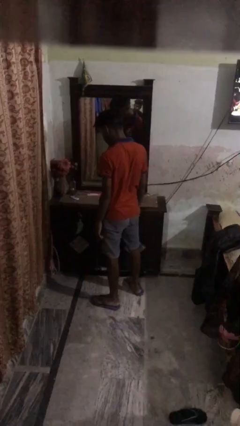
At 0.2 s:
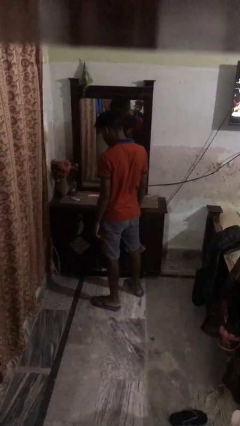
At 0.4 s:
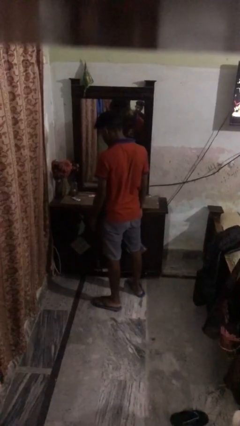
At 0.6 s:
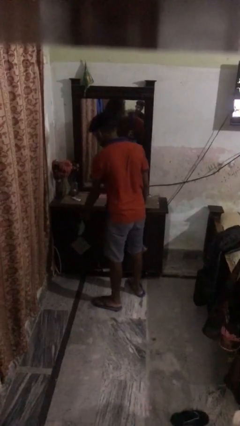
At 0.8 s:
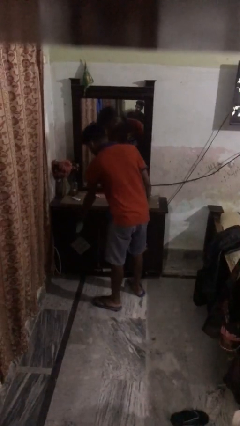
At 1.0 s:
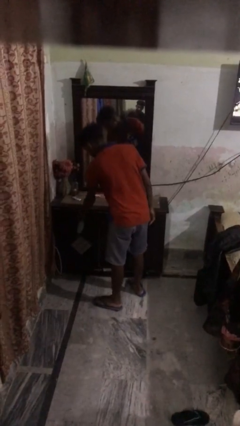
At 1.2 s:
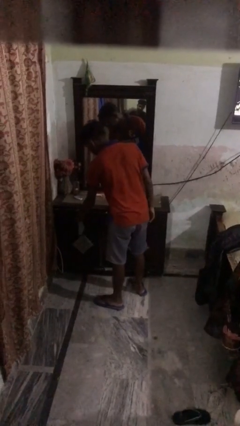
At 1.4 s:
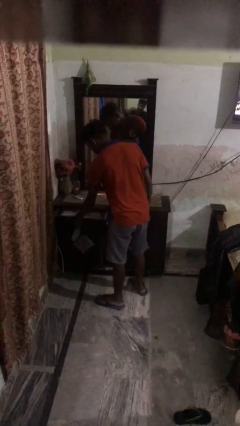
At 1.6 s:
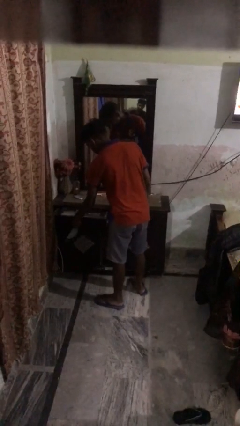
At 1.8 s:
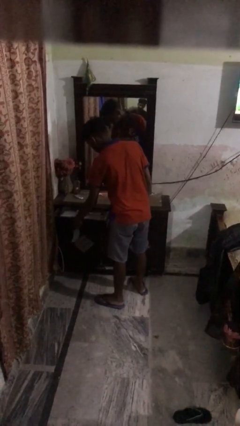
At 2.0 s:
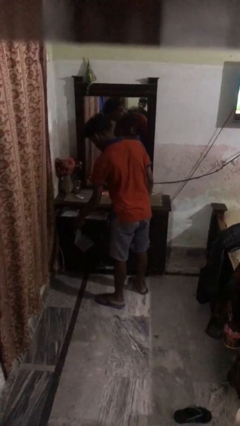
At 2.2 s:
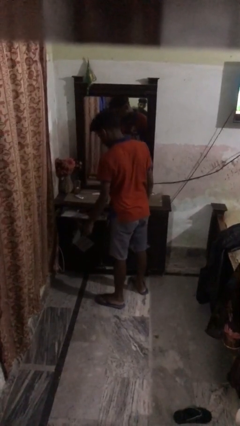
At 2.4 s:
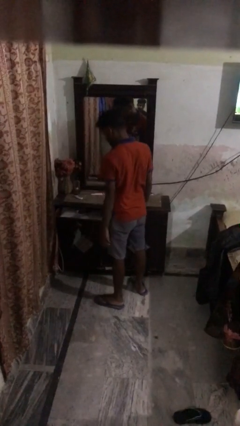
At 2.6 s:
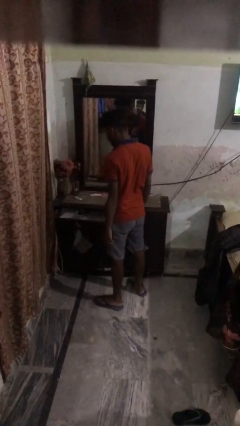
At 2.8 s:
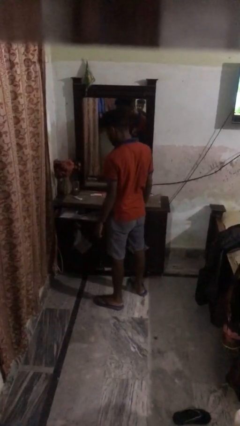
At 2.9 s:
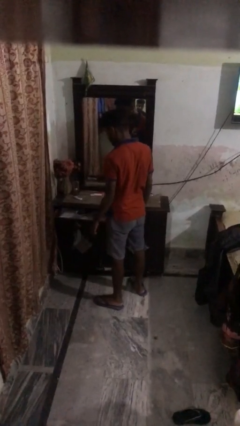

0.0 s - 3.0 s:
person opens dresser drawer

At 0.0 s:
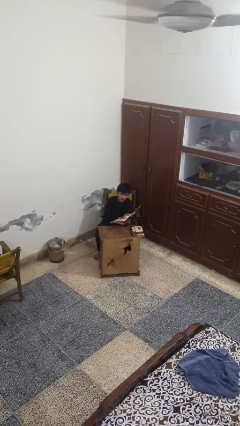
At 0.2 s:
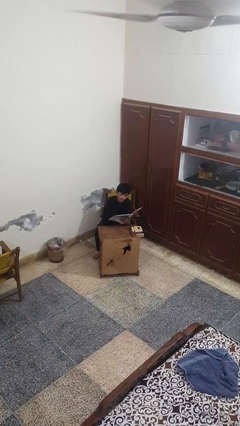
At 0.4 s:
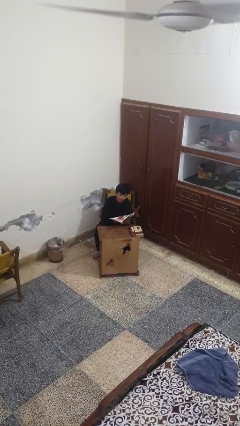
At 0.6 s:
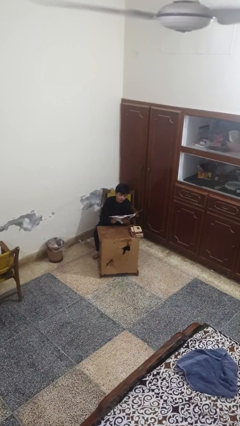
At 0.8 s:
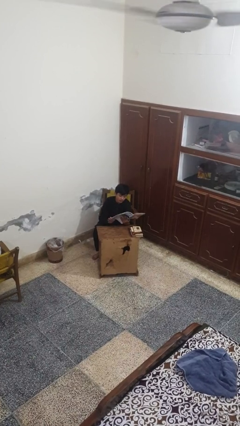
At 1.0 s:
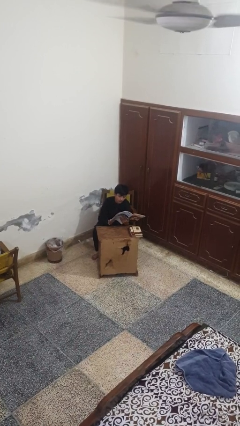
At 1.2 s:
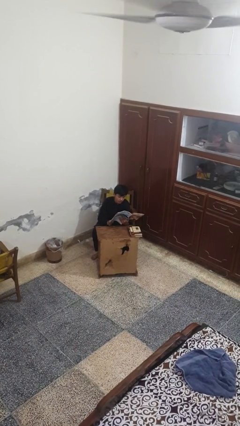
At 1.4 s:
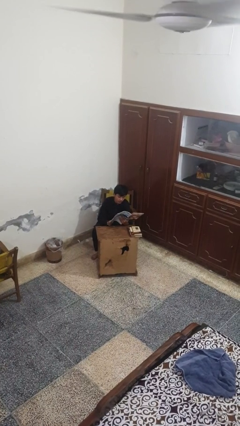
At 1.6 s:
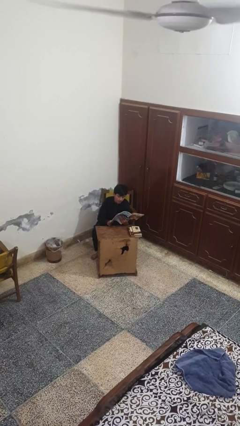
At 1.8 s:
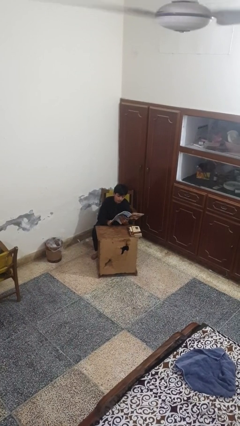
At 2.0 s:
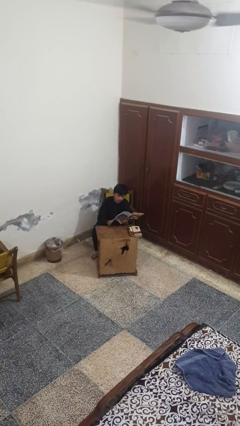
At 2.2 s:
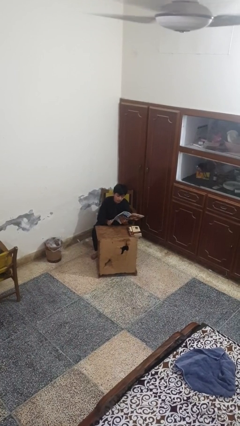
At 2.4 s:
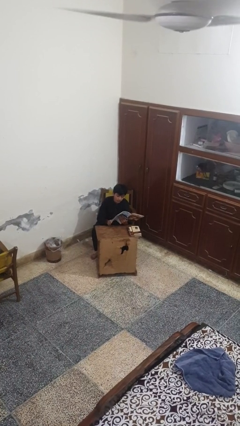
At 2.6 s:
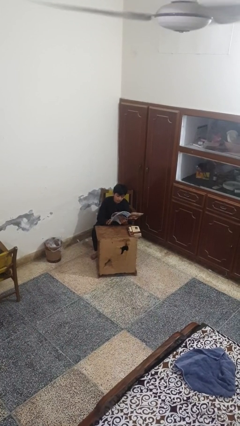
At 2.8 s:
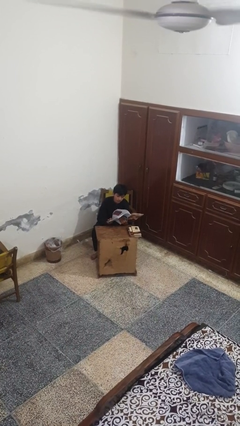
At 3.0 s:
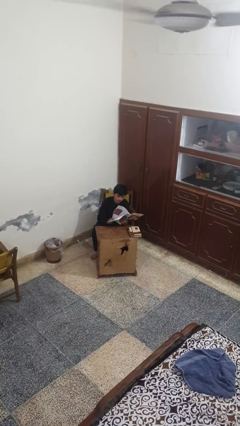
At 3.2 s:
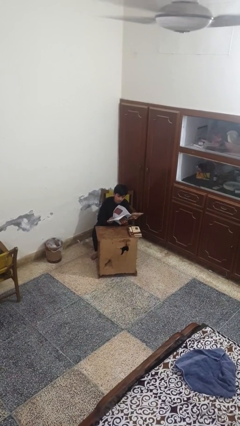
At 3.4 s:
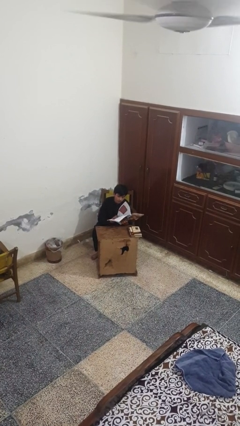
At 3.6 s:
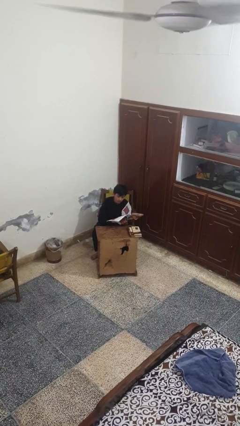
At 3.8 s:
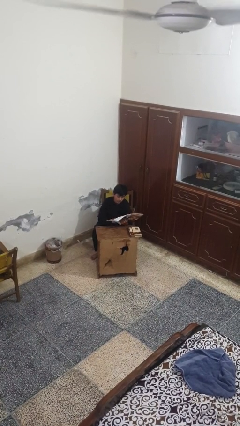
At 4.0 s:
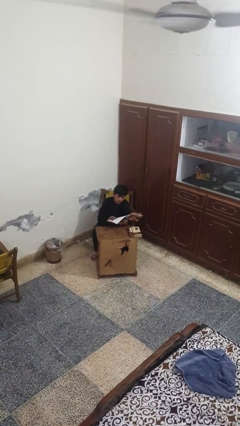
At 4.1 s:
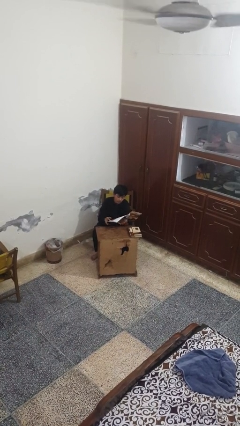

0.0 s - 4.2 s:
person reads magazine

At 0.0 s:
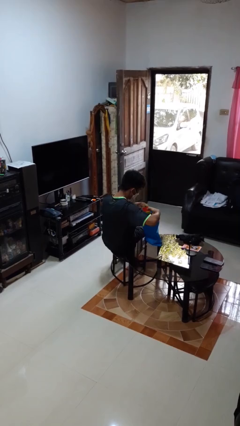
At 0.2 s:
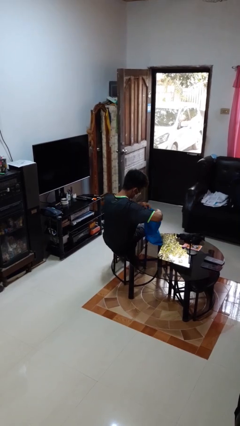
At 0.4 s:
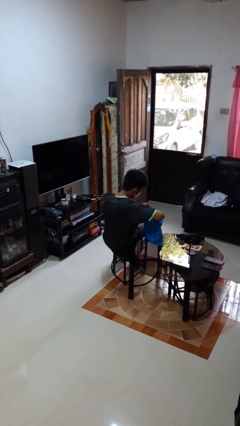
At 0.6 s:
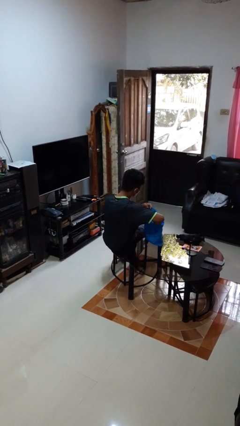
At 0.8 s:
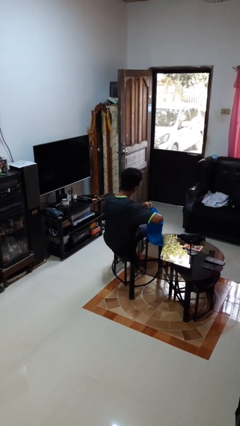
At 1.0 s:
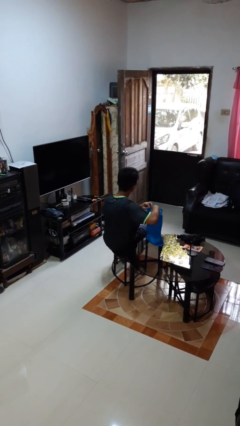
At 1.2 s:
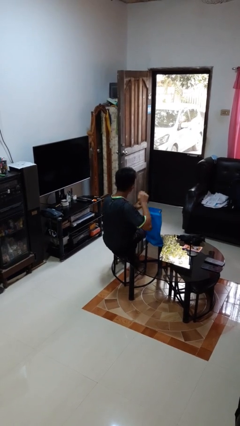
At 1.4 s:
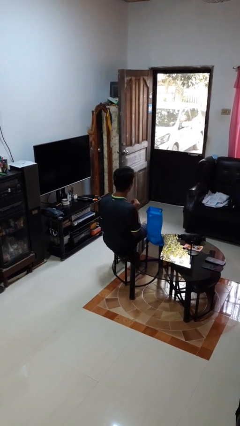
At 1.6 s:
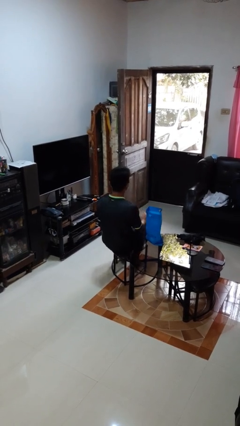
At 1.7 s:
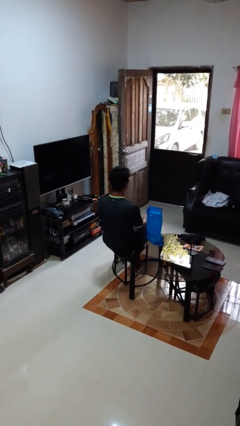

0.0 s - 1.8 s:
person puts object into bag

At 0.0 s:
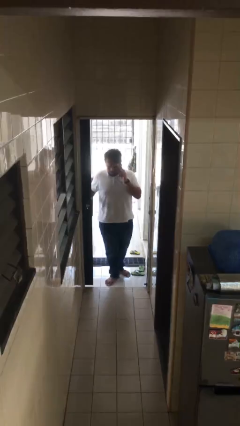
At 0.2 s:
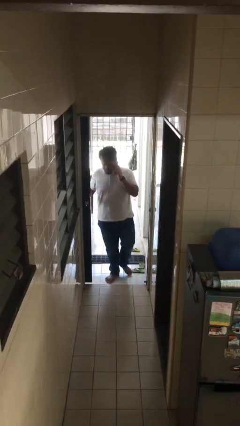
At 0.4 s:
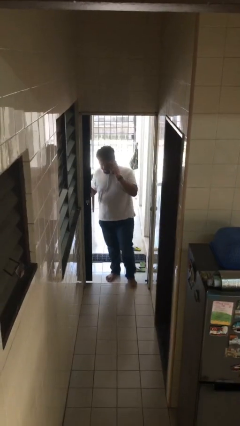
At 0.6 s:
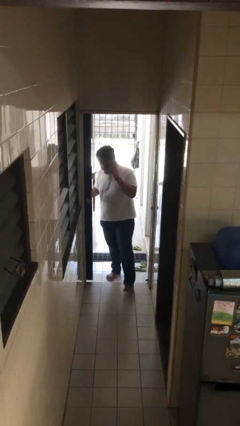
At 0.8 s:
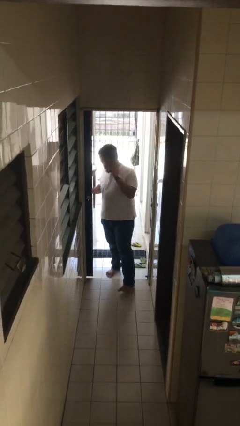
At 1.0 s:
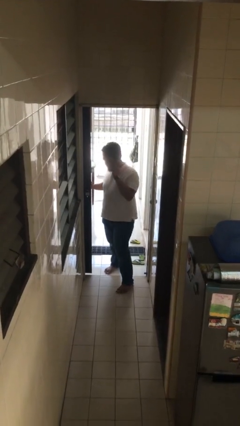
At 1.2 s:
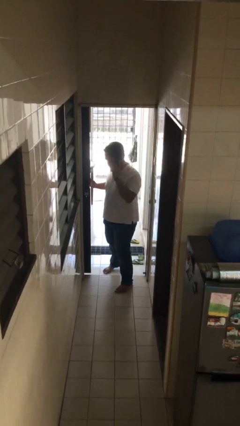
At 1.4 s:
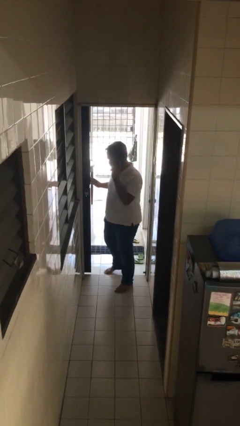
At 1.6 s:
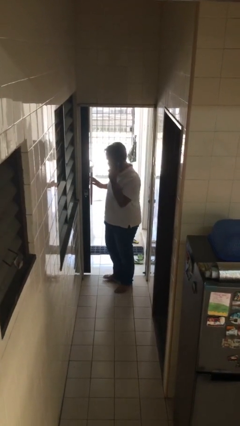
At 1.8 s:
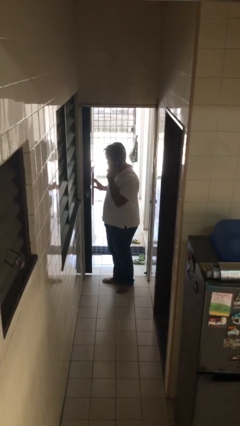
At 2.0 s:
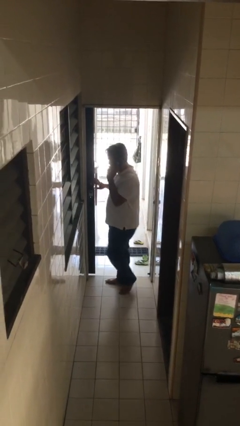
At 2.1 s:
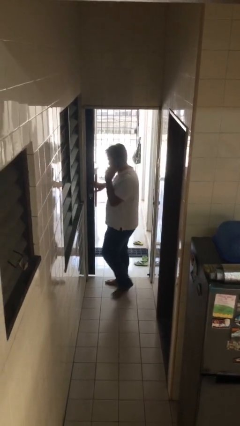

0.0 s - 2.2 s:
person enters scene through structure

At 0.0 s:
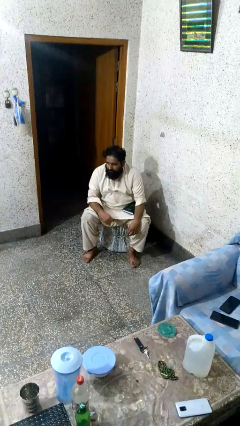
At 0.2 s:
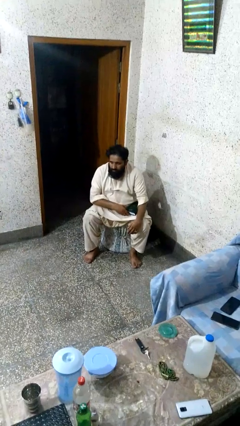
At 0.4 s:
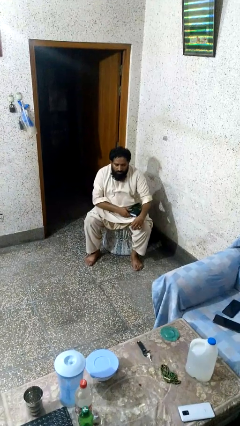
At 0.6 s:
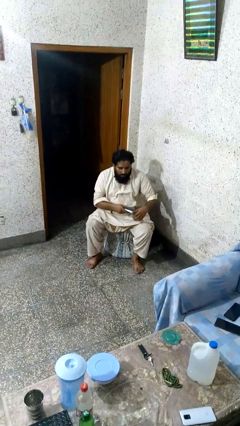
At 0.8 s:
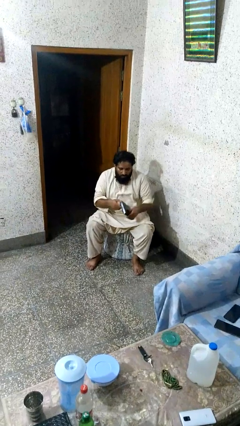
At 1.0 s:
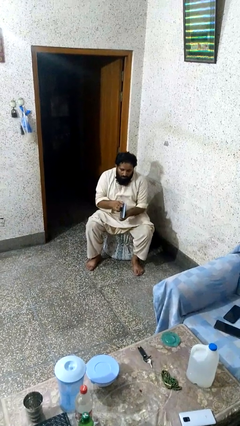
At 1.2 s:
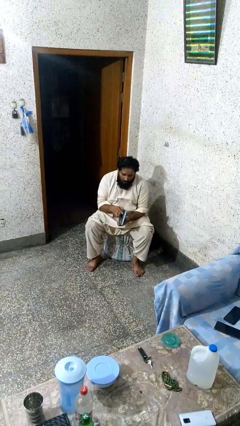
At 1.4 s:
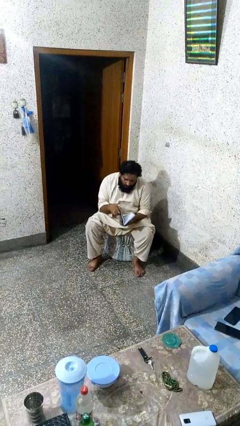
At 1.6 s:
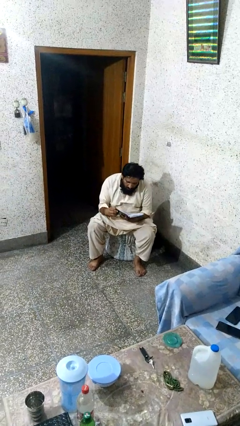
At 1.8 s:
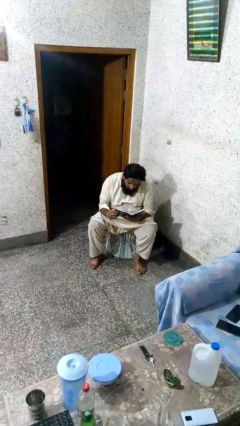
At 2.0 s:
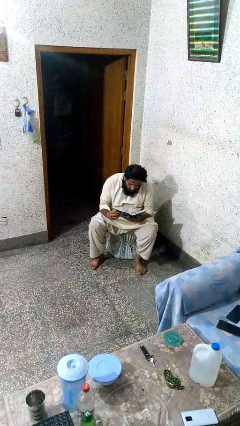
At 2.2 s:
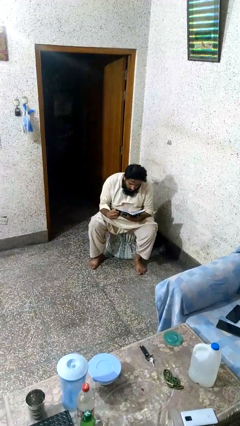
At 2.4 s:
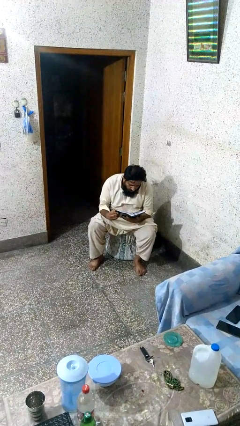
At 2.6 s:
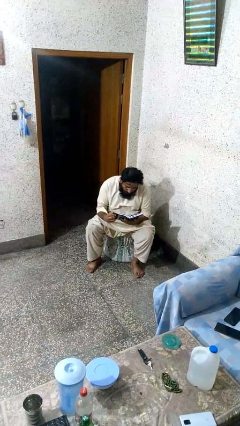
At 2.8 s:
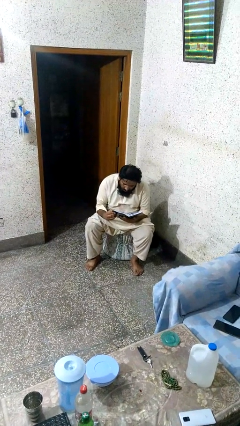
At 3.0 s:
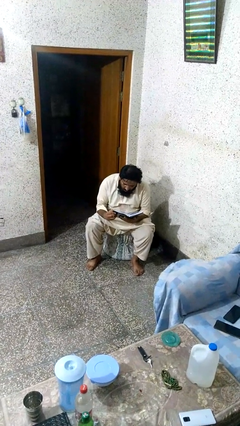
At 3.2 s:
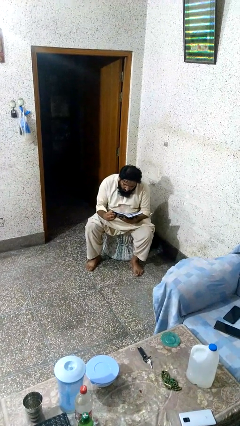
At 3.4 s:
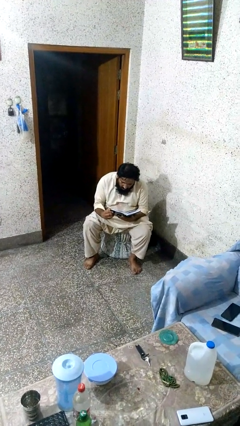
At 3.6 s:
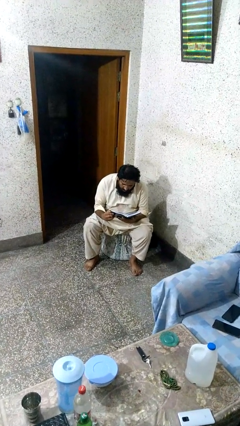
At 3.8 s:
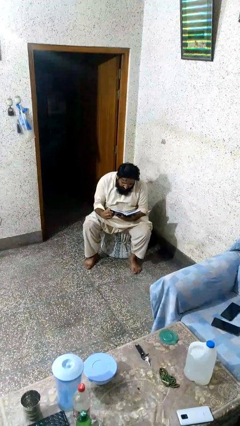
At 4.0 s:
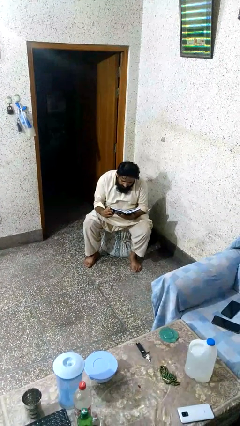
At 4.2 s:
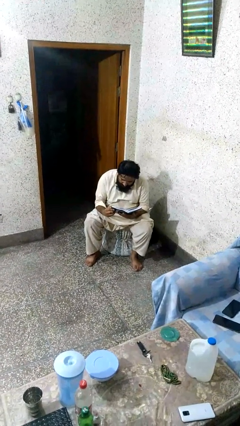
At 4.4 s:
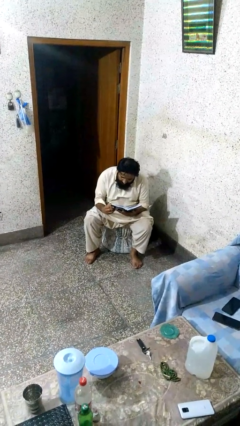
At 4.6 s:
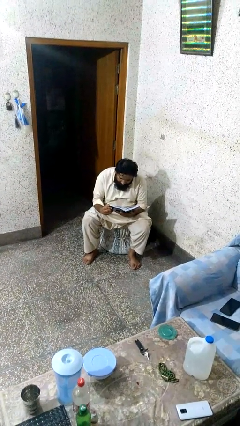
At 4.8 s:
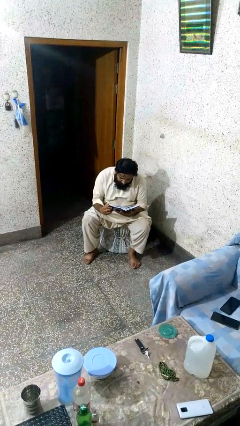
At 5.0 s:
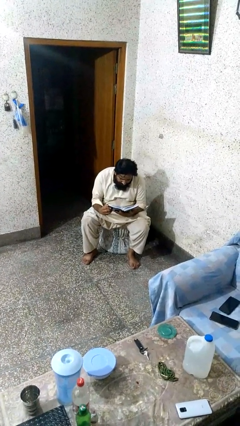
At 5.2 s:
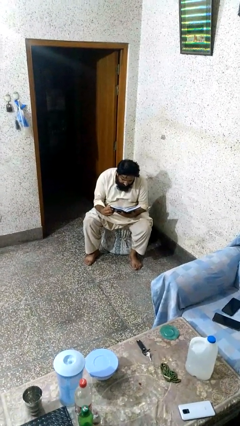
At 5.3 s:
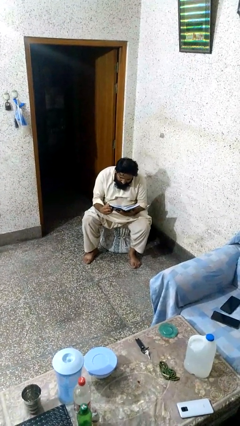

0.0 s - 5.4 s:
person reads book

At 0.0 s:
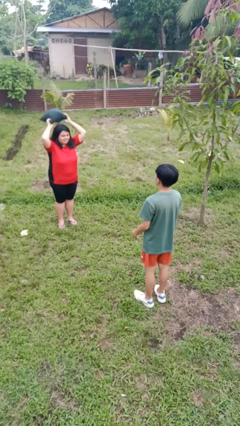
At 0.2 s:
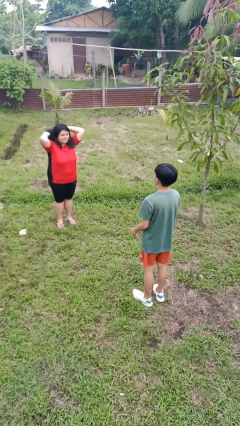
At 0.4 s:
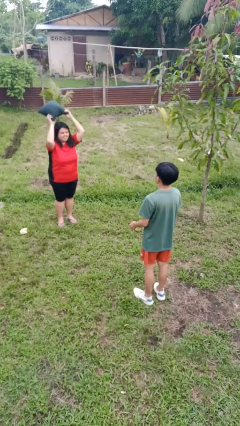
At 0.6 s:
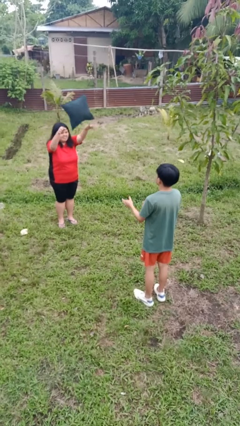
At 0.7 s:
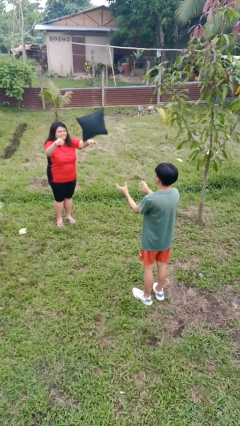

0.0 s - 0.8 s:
person throws object to person
